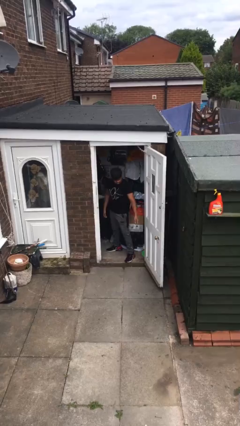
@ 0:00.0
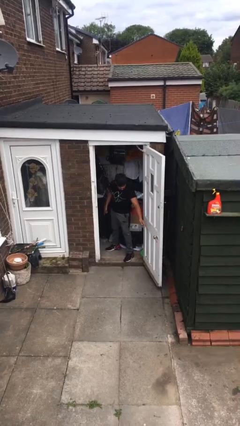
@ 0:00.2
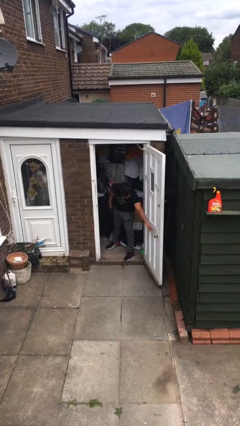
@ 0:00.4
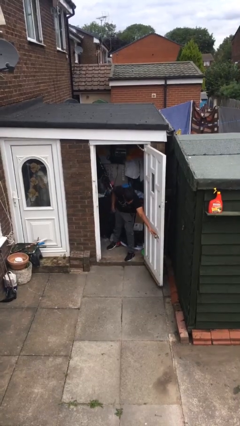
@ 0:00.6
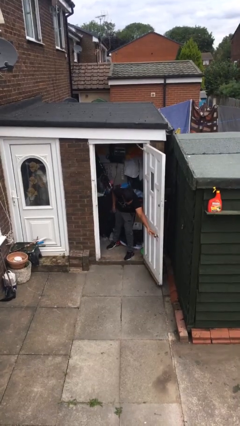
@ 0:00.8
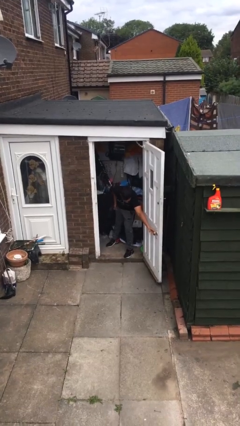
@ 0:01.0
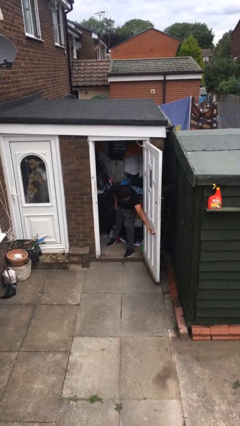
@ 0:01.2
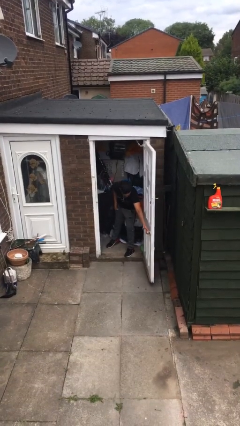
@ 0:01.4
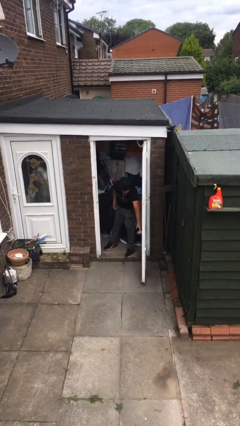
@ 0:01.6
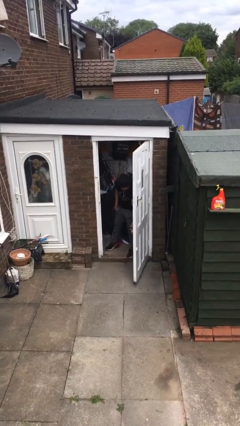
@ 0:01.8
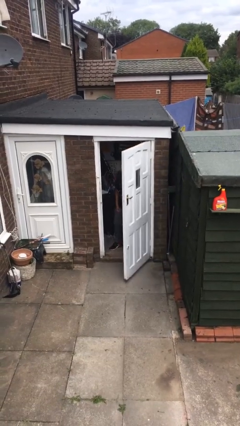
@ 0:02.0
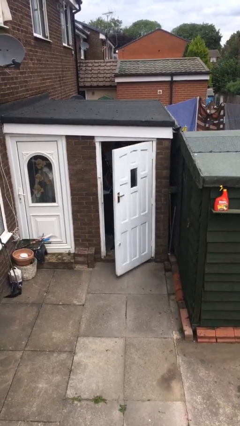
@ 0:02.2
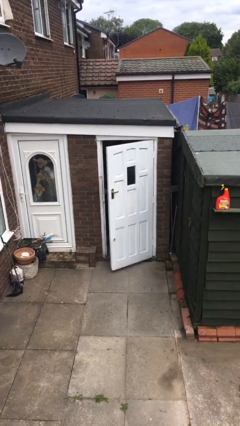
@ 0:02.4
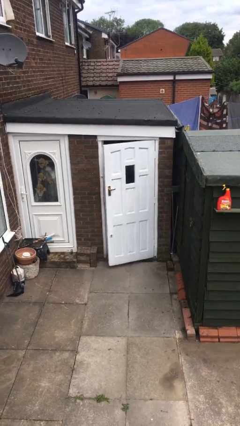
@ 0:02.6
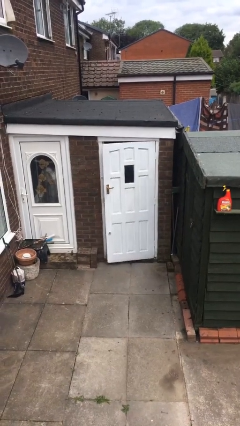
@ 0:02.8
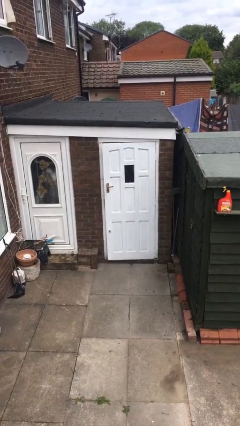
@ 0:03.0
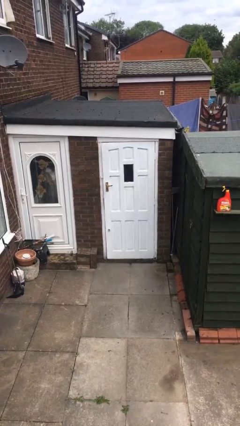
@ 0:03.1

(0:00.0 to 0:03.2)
person closes facility door

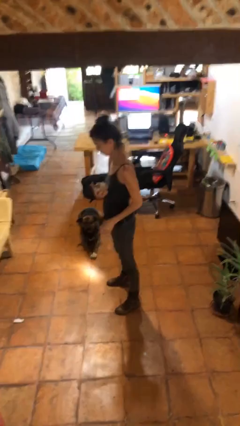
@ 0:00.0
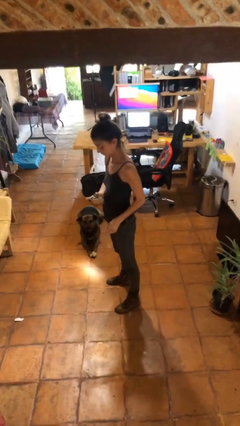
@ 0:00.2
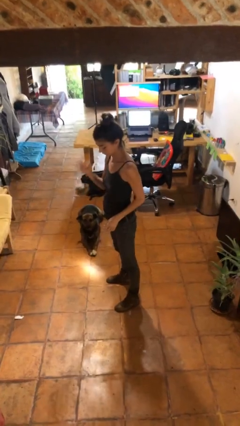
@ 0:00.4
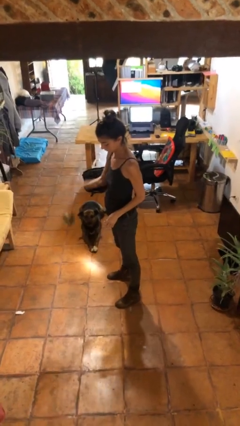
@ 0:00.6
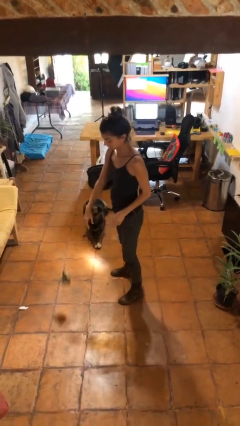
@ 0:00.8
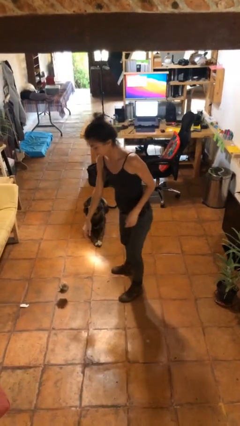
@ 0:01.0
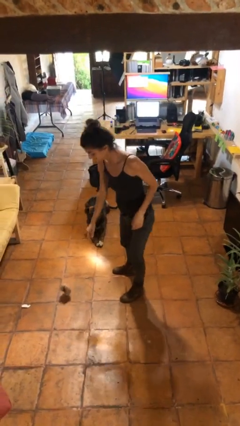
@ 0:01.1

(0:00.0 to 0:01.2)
person drops object

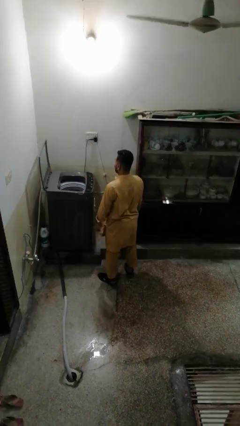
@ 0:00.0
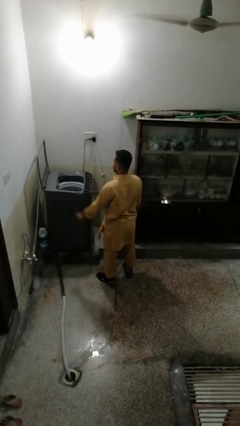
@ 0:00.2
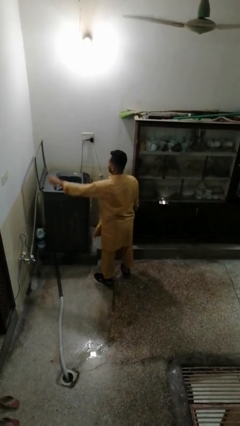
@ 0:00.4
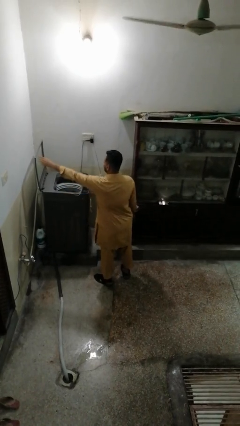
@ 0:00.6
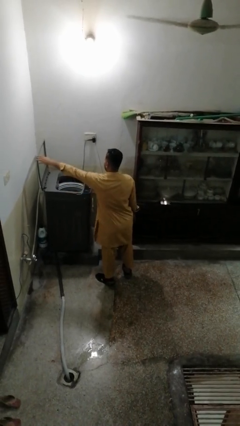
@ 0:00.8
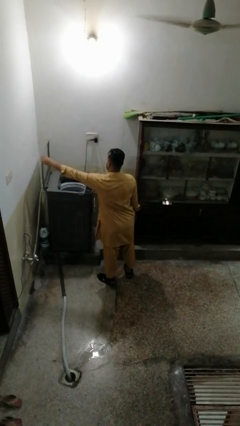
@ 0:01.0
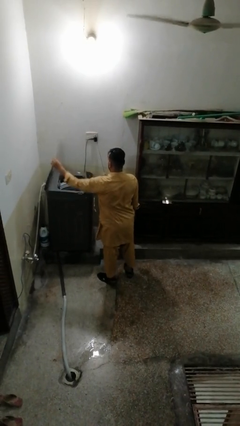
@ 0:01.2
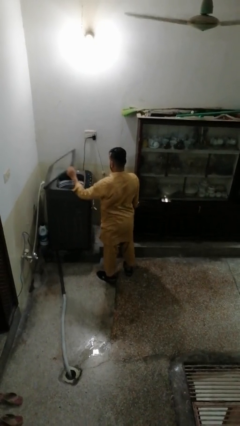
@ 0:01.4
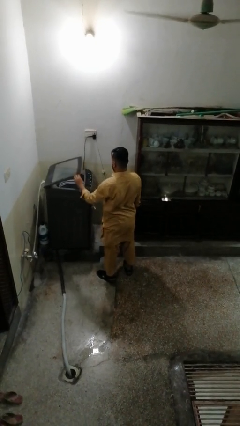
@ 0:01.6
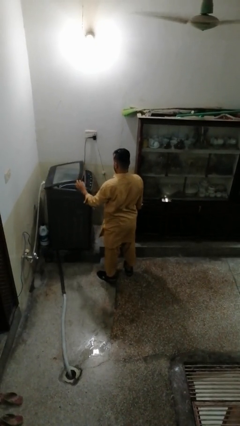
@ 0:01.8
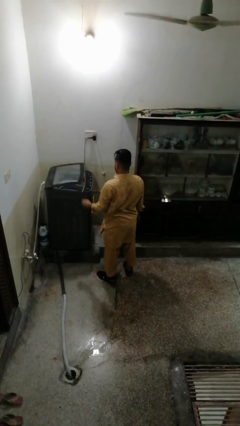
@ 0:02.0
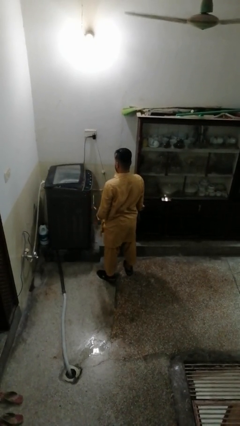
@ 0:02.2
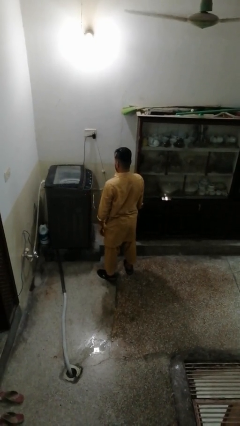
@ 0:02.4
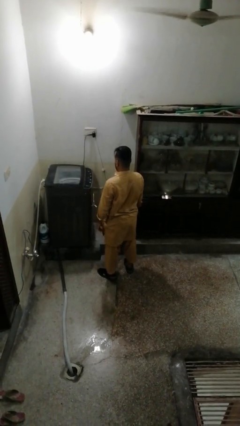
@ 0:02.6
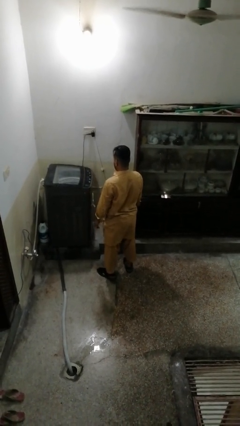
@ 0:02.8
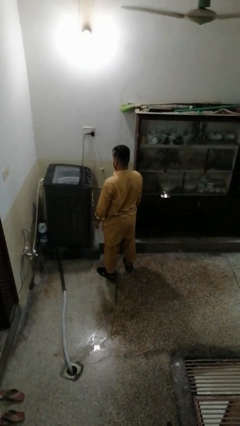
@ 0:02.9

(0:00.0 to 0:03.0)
person closes clothes washer

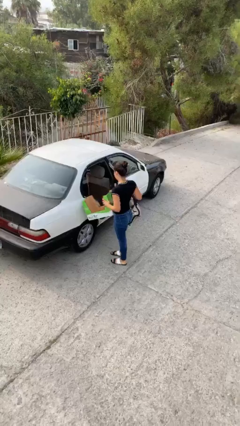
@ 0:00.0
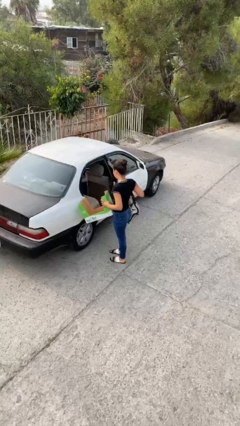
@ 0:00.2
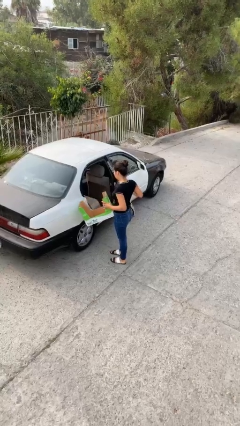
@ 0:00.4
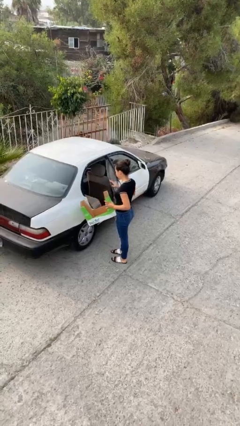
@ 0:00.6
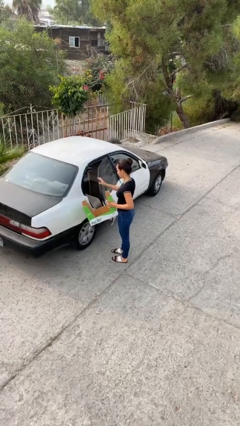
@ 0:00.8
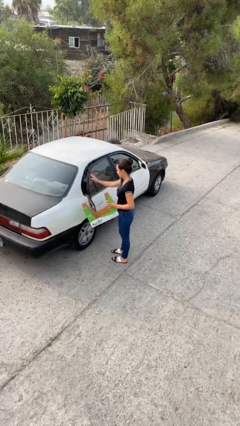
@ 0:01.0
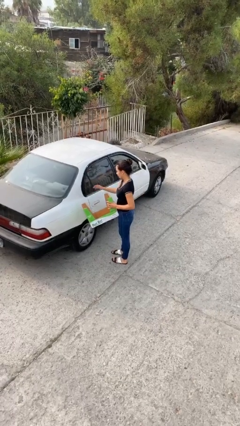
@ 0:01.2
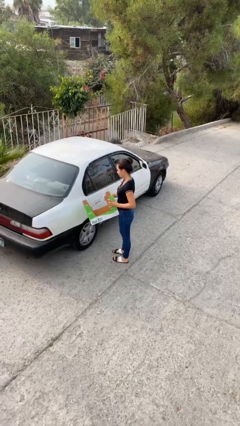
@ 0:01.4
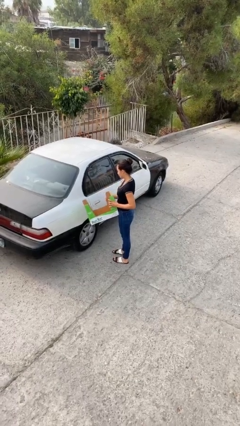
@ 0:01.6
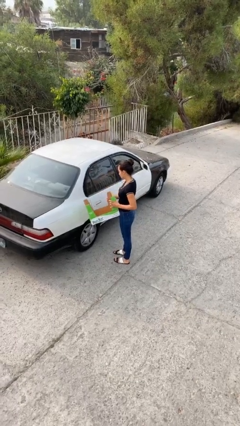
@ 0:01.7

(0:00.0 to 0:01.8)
person closes car door

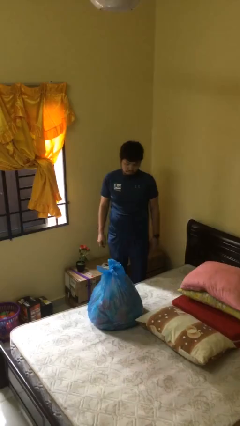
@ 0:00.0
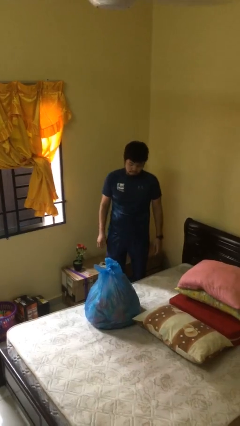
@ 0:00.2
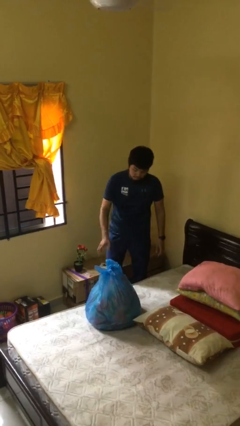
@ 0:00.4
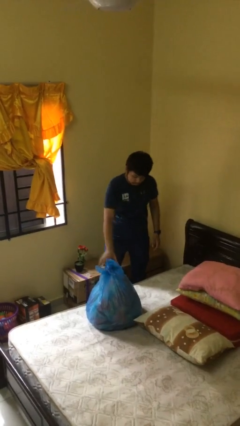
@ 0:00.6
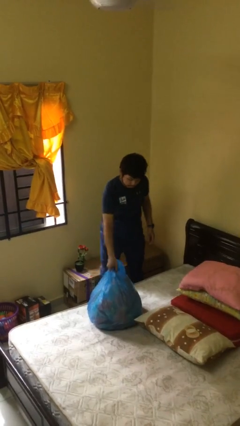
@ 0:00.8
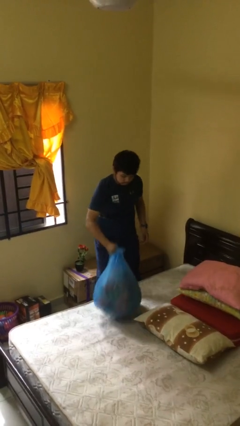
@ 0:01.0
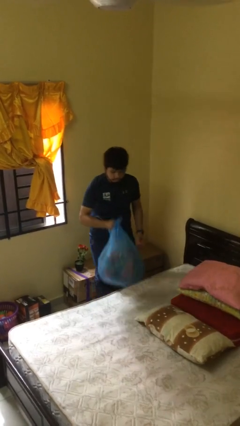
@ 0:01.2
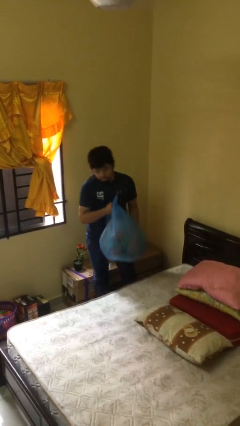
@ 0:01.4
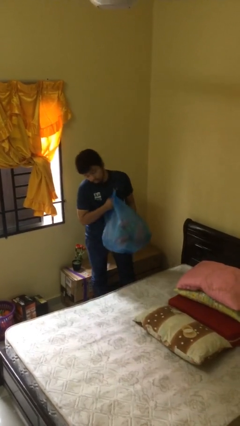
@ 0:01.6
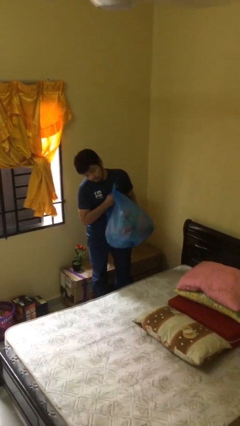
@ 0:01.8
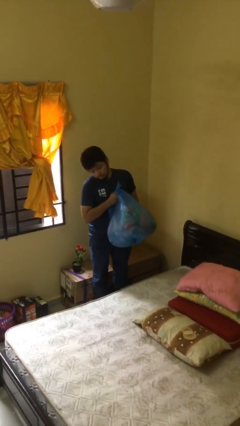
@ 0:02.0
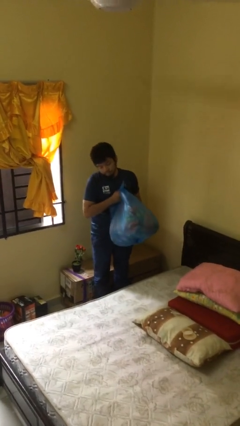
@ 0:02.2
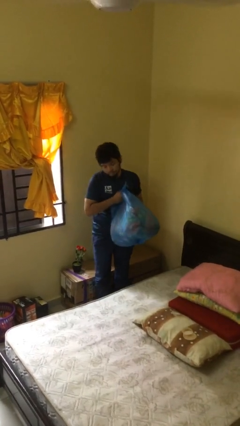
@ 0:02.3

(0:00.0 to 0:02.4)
person picks up object from bed

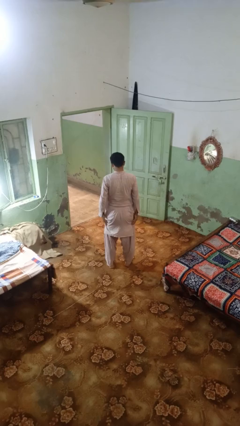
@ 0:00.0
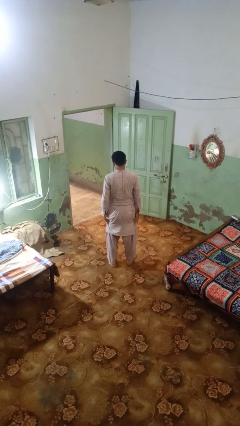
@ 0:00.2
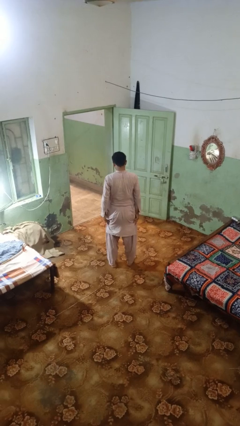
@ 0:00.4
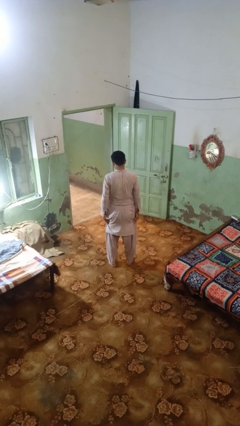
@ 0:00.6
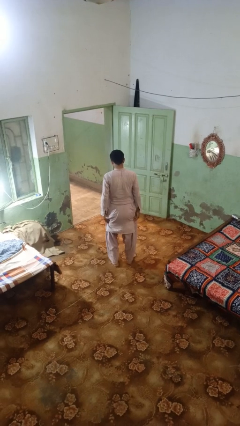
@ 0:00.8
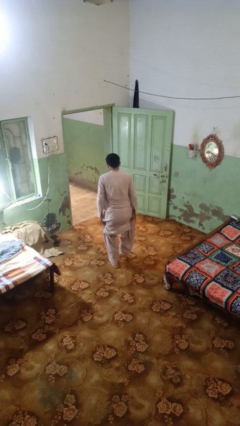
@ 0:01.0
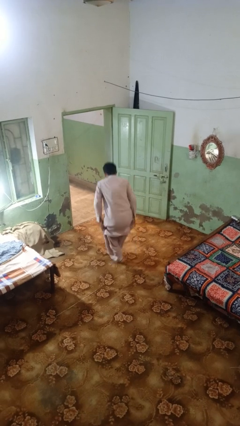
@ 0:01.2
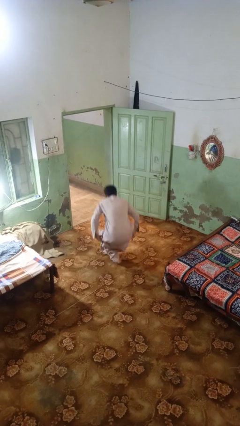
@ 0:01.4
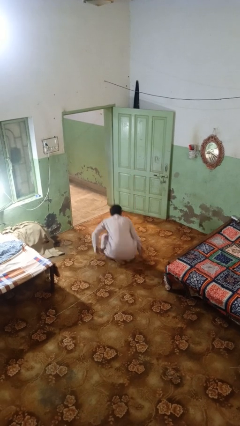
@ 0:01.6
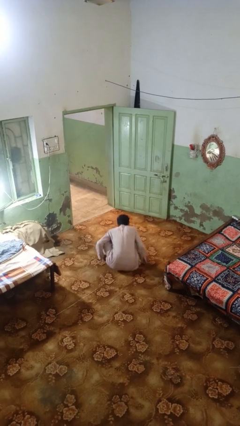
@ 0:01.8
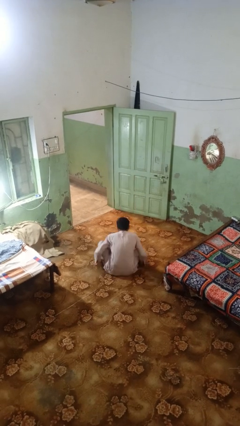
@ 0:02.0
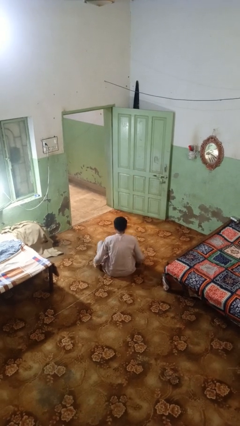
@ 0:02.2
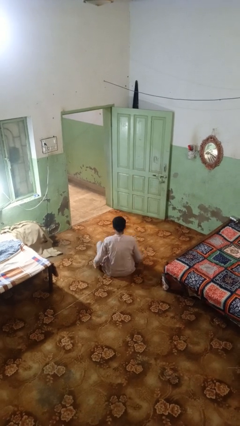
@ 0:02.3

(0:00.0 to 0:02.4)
person sits crisscross

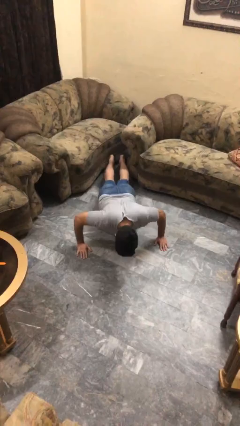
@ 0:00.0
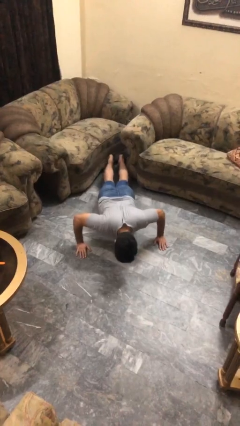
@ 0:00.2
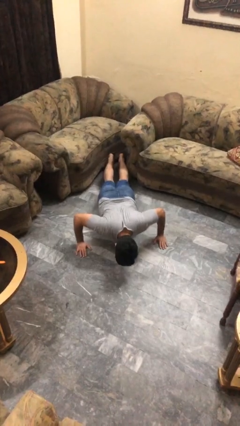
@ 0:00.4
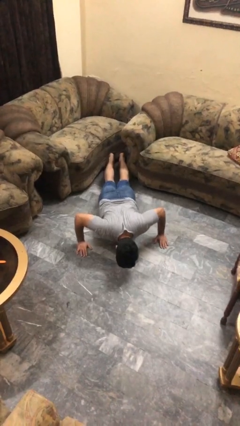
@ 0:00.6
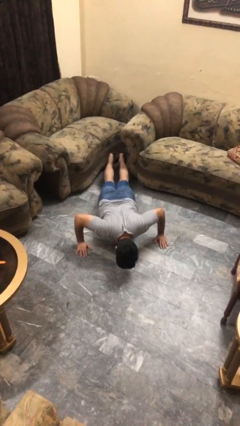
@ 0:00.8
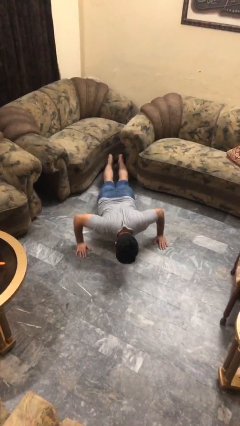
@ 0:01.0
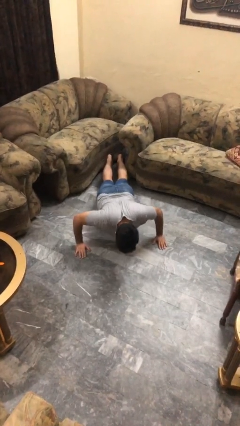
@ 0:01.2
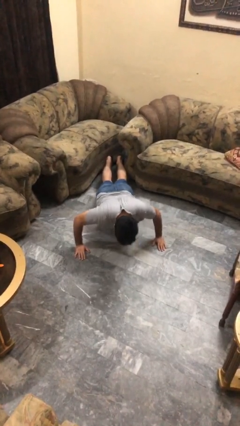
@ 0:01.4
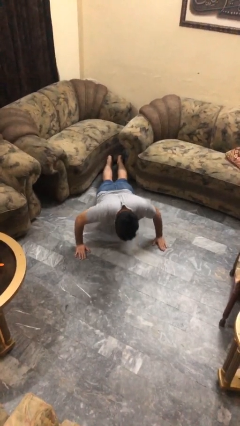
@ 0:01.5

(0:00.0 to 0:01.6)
person exercises with pushup

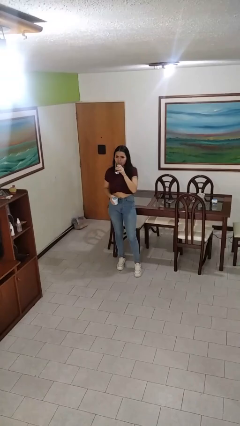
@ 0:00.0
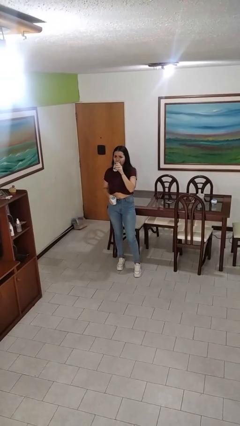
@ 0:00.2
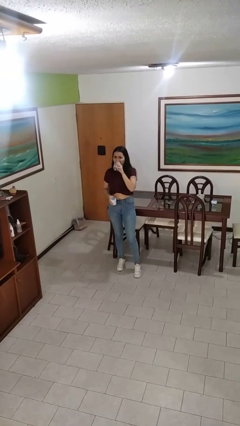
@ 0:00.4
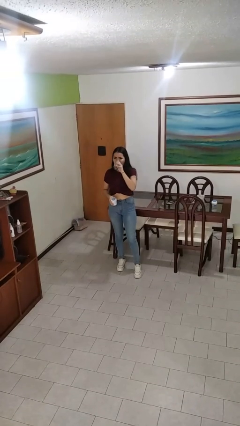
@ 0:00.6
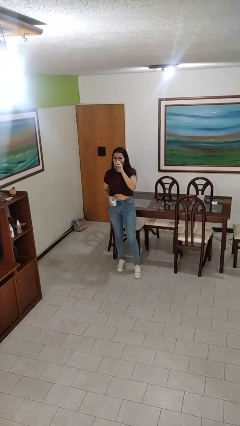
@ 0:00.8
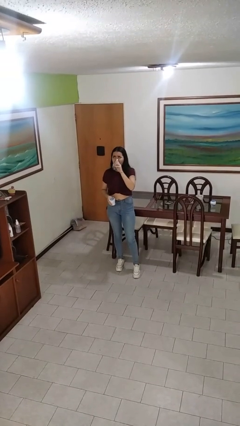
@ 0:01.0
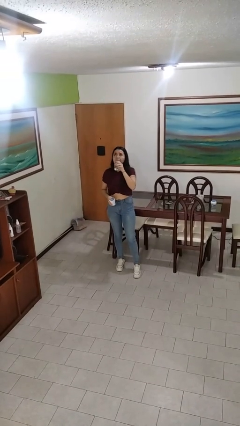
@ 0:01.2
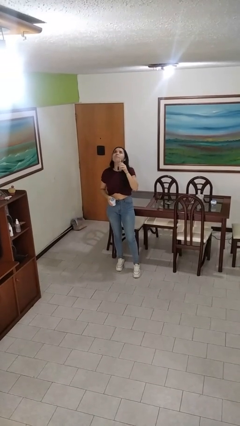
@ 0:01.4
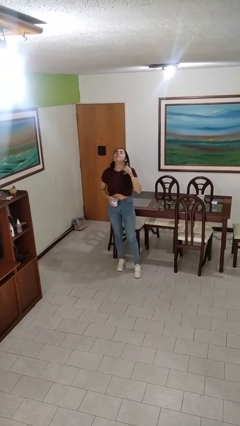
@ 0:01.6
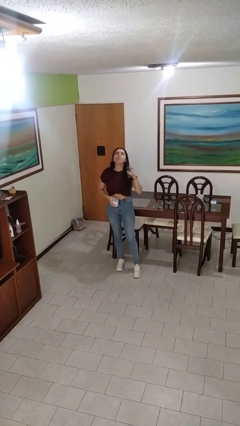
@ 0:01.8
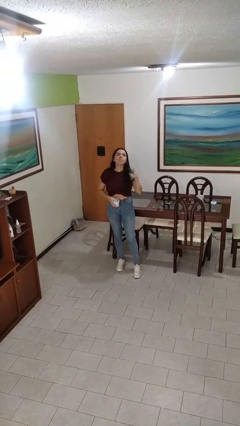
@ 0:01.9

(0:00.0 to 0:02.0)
person drinks from cup
